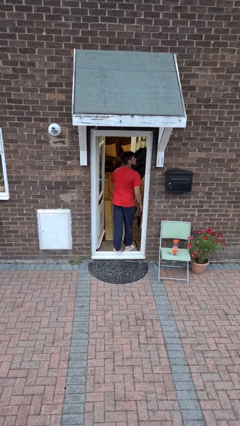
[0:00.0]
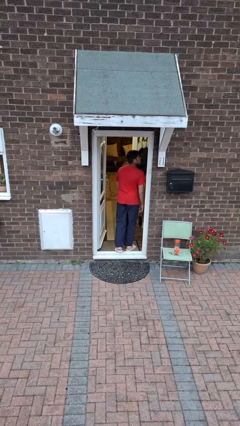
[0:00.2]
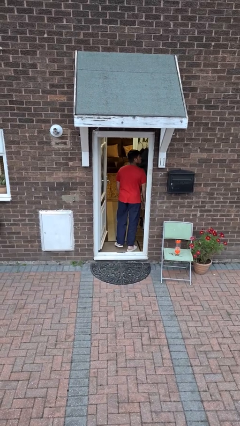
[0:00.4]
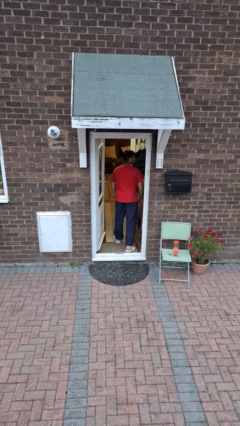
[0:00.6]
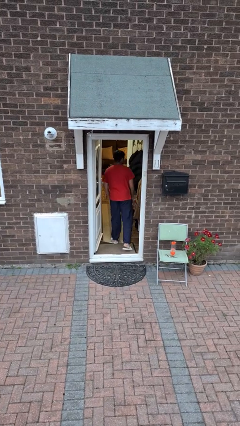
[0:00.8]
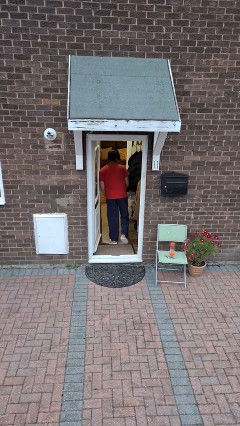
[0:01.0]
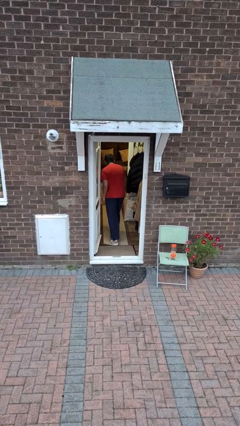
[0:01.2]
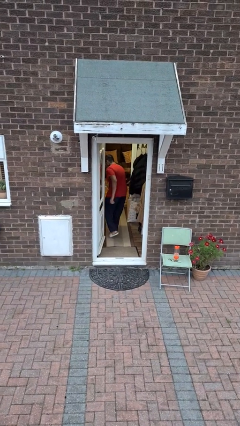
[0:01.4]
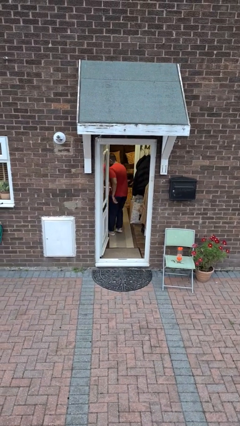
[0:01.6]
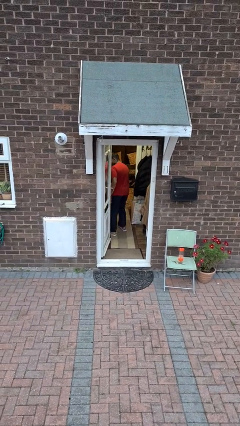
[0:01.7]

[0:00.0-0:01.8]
person bumps into wall

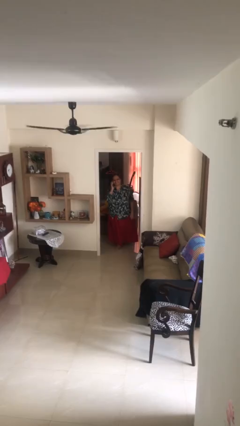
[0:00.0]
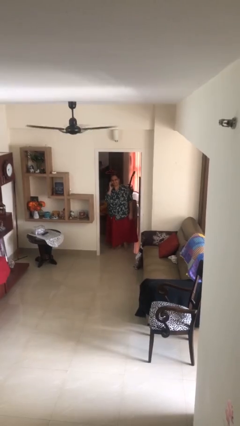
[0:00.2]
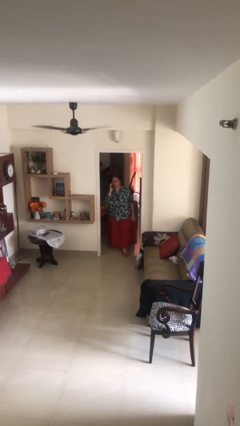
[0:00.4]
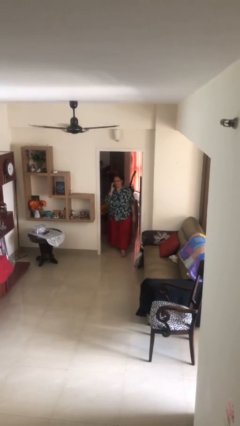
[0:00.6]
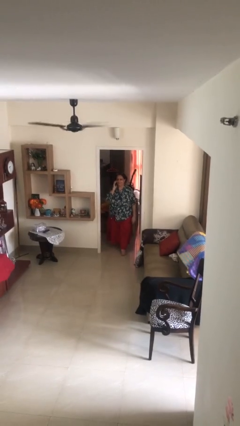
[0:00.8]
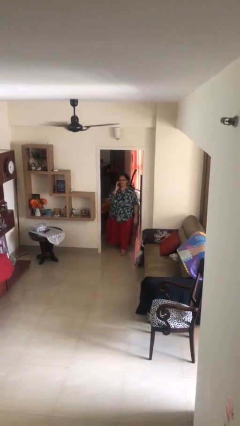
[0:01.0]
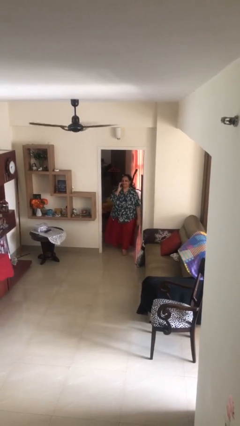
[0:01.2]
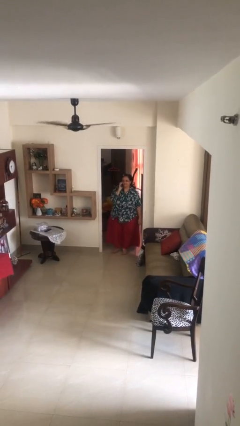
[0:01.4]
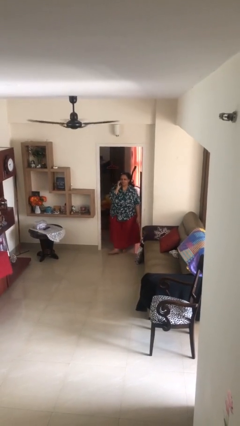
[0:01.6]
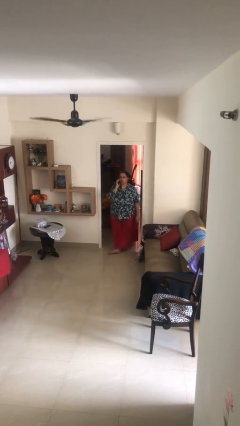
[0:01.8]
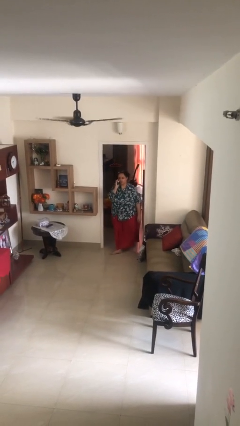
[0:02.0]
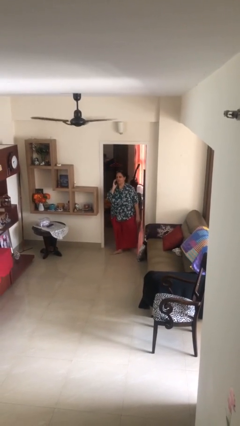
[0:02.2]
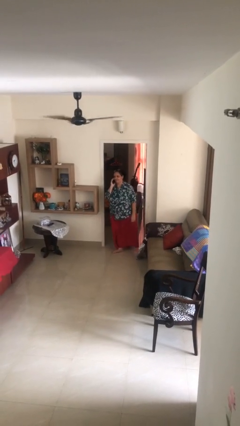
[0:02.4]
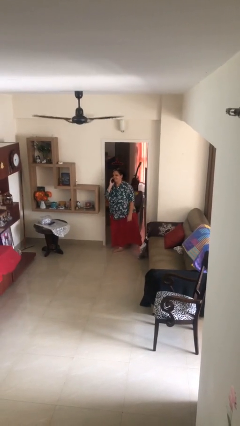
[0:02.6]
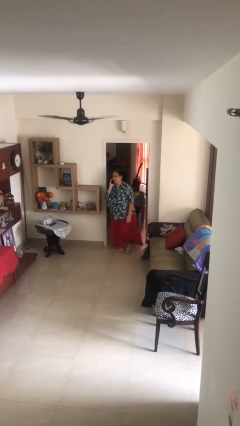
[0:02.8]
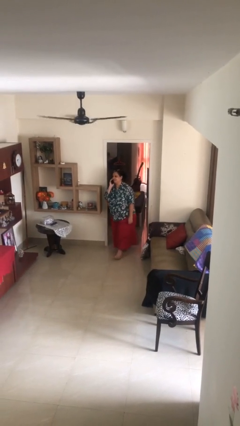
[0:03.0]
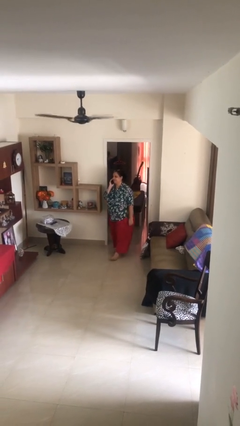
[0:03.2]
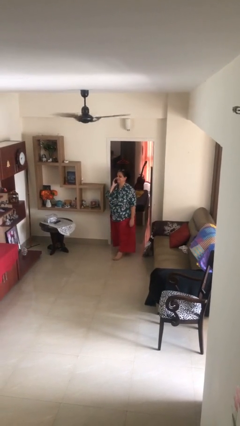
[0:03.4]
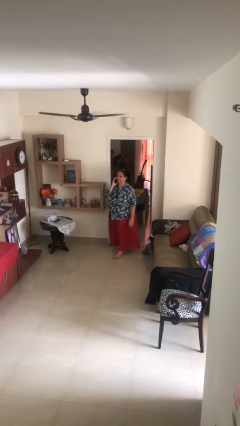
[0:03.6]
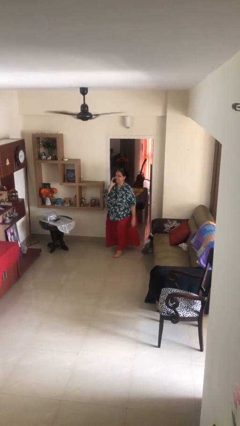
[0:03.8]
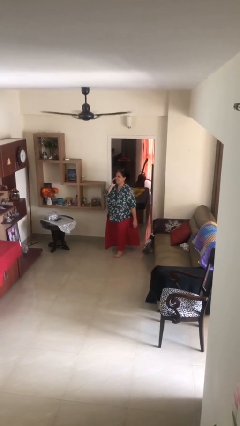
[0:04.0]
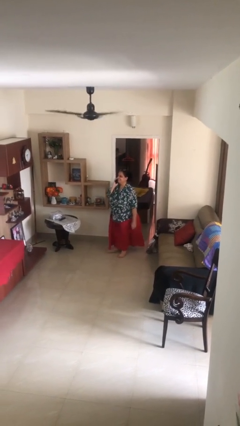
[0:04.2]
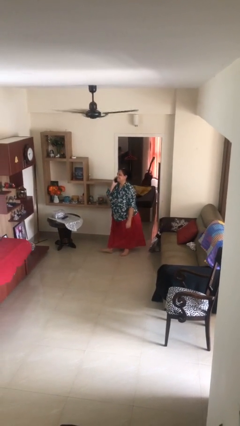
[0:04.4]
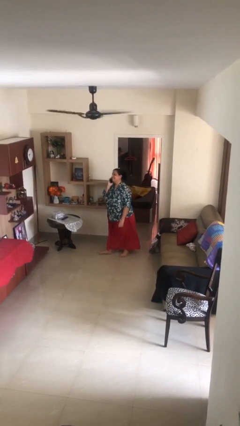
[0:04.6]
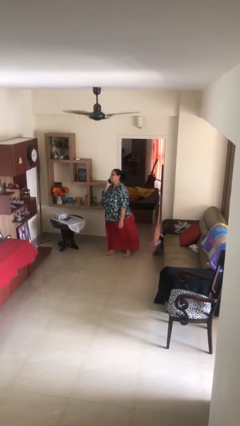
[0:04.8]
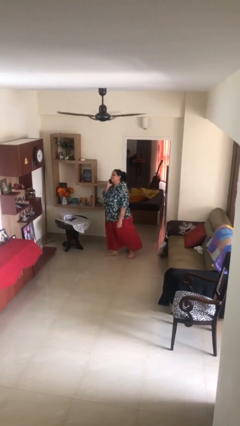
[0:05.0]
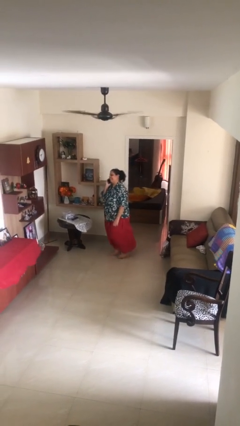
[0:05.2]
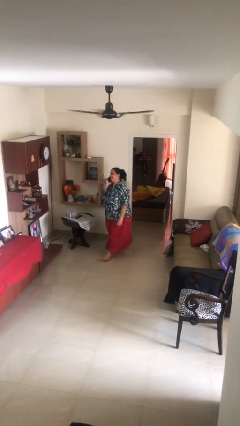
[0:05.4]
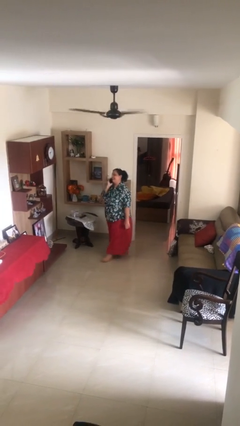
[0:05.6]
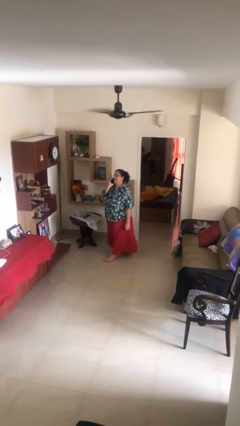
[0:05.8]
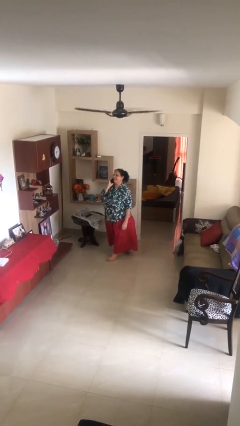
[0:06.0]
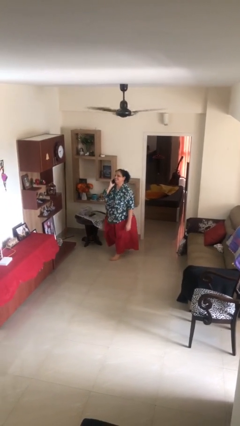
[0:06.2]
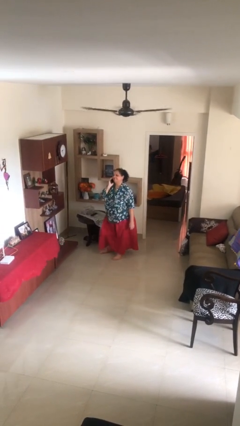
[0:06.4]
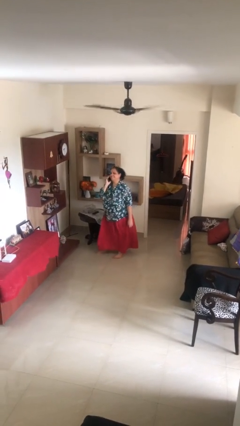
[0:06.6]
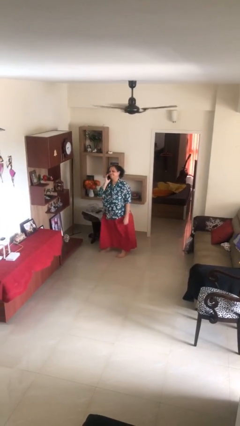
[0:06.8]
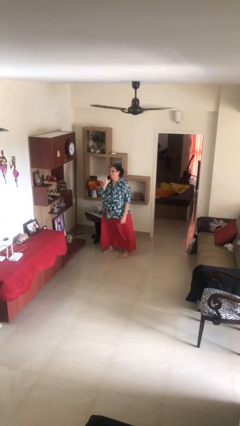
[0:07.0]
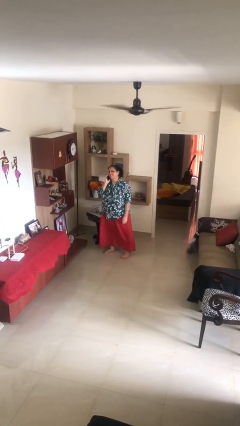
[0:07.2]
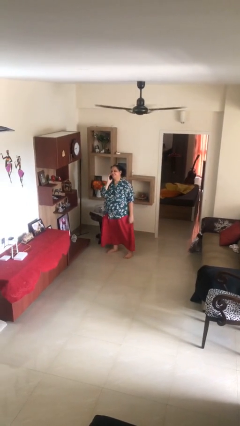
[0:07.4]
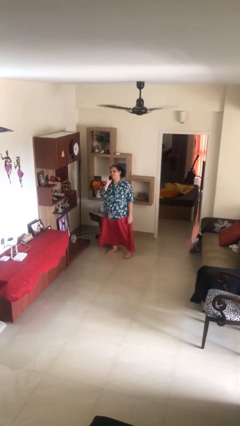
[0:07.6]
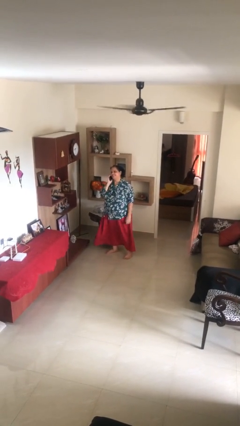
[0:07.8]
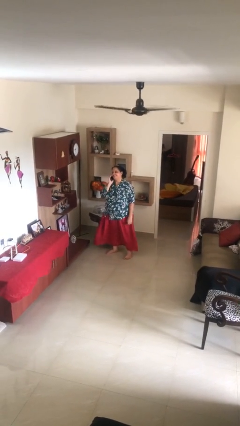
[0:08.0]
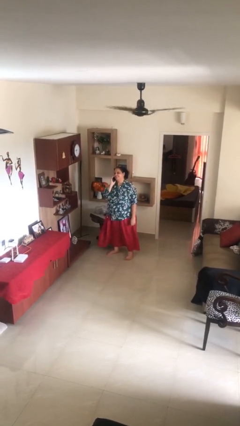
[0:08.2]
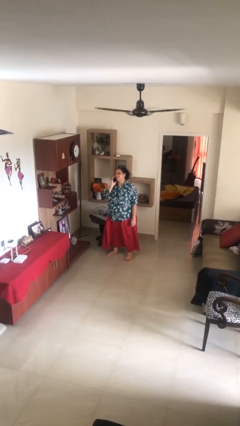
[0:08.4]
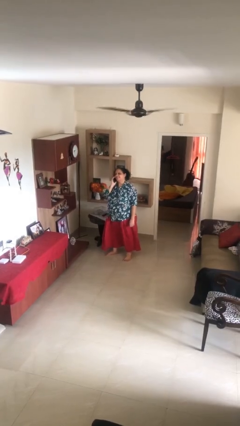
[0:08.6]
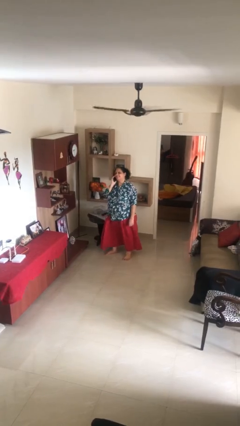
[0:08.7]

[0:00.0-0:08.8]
person enters scene through structure

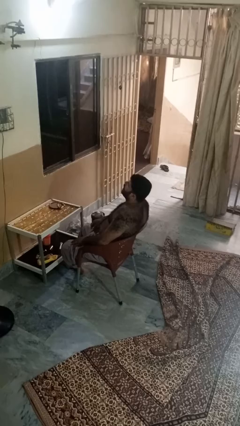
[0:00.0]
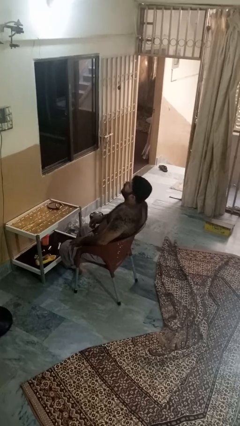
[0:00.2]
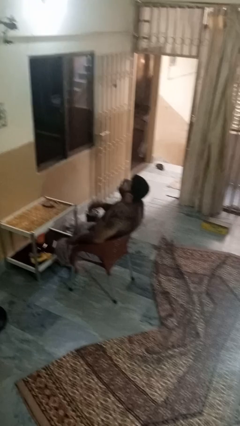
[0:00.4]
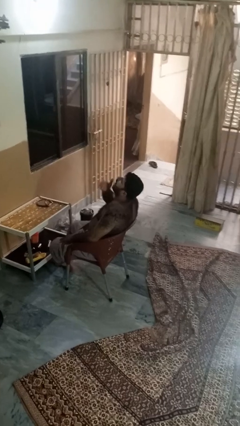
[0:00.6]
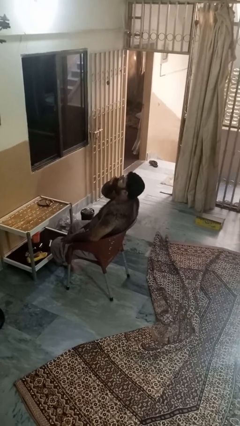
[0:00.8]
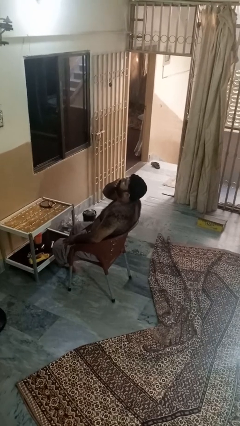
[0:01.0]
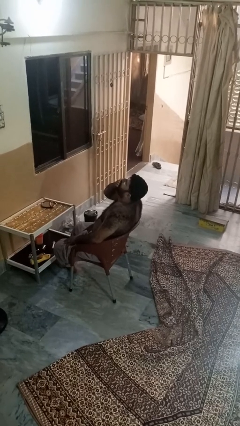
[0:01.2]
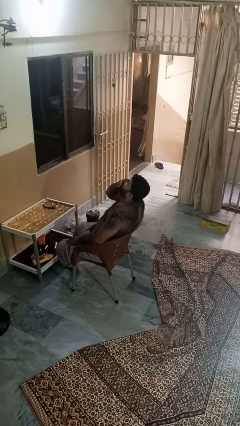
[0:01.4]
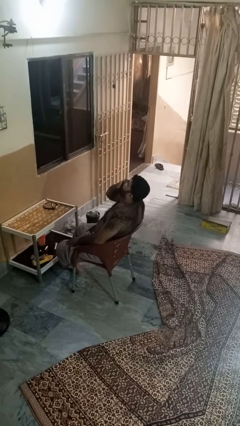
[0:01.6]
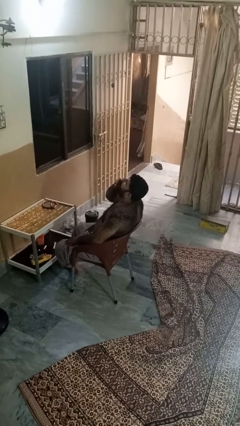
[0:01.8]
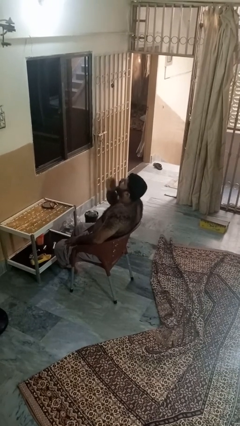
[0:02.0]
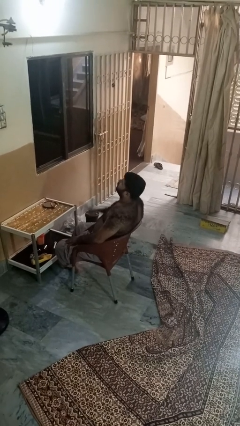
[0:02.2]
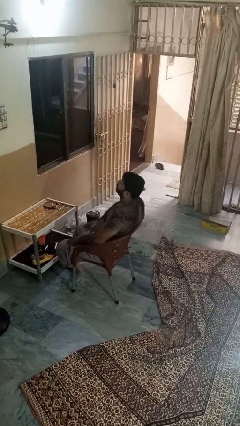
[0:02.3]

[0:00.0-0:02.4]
person yawns

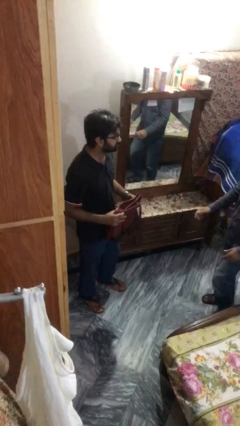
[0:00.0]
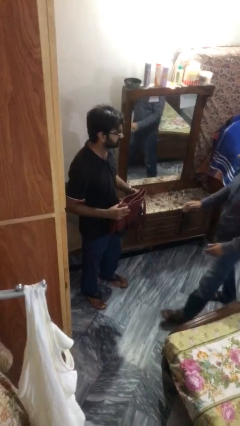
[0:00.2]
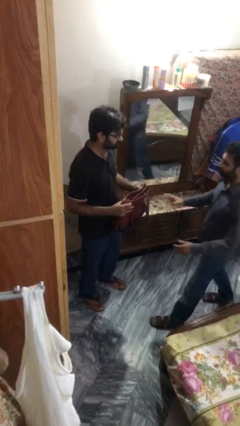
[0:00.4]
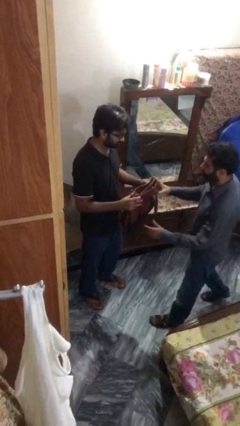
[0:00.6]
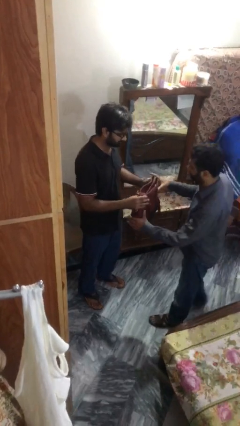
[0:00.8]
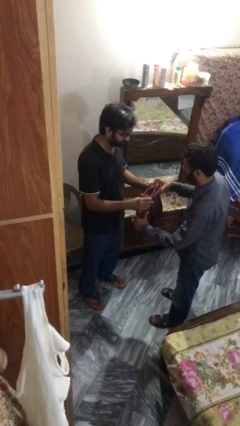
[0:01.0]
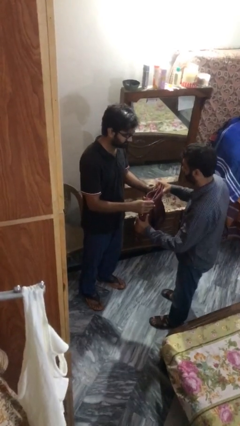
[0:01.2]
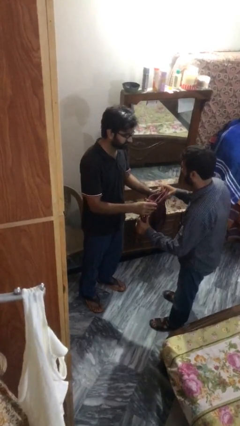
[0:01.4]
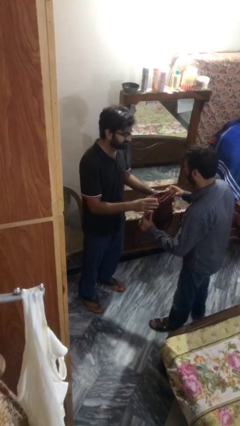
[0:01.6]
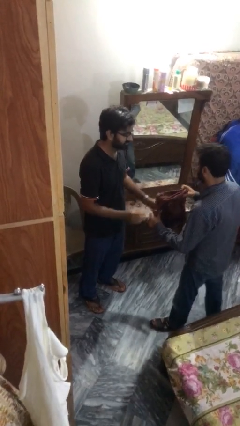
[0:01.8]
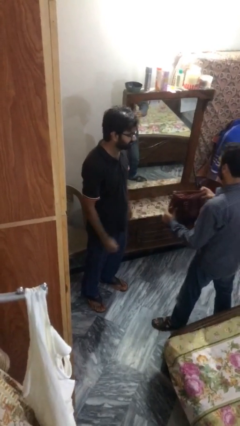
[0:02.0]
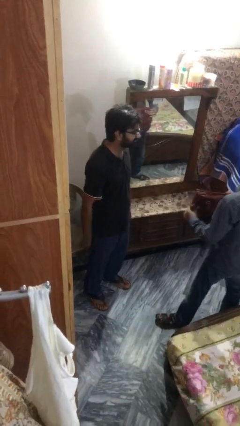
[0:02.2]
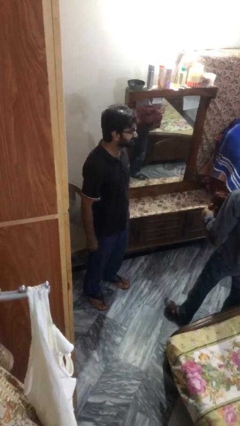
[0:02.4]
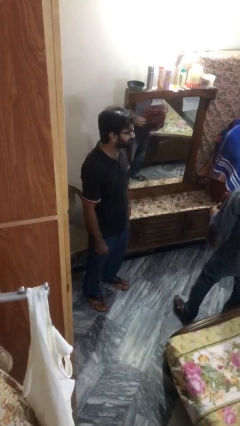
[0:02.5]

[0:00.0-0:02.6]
person transfers object to person

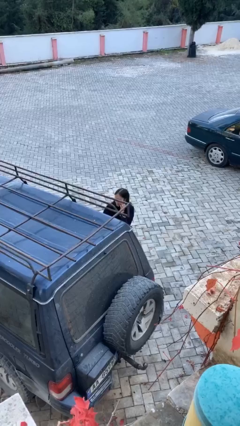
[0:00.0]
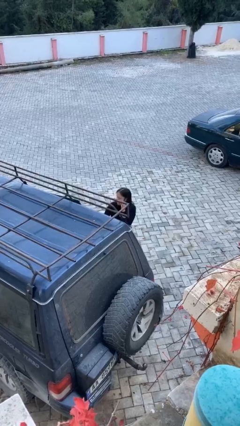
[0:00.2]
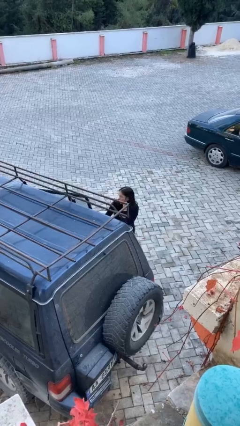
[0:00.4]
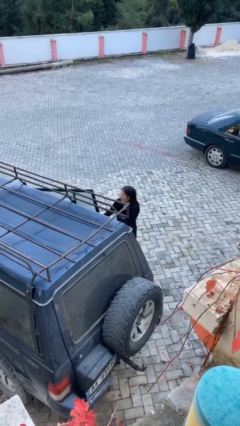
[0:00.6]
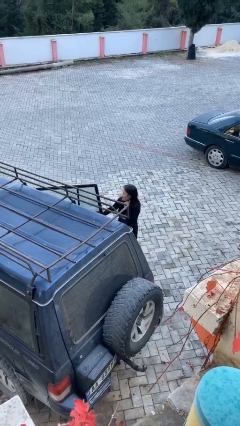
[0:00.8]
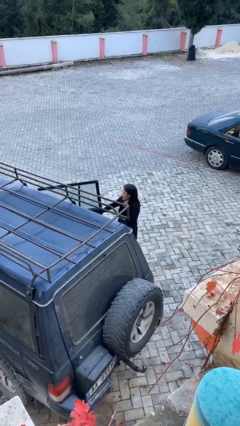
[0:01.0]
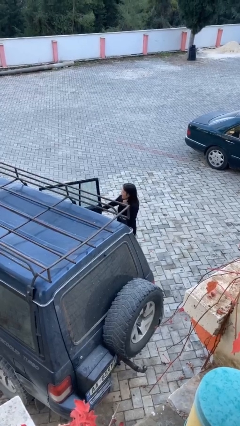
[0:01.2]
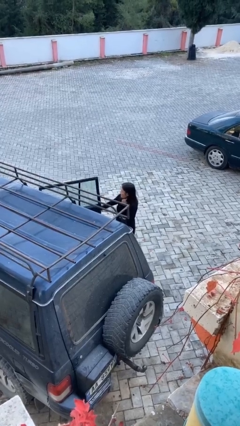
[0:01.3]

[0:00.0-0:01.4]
person opens car door
